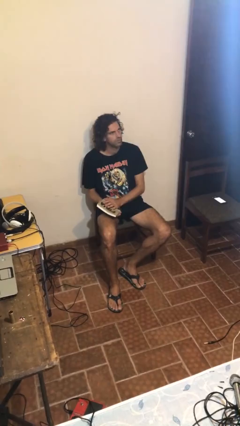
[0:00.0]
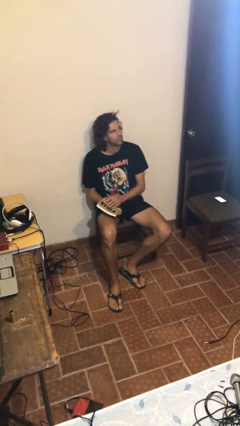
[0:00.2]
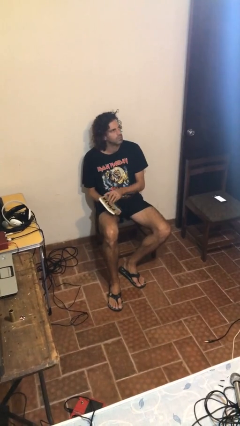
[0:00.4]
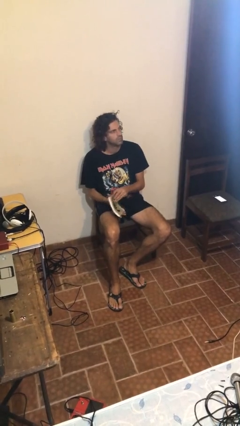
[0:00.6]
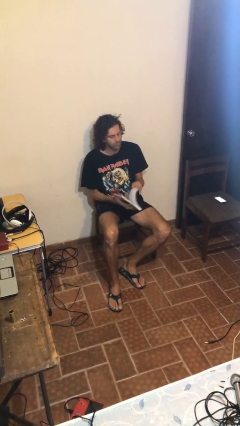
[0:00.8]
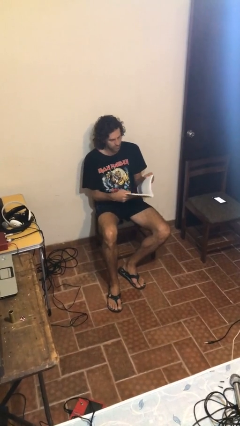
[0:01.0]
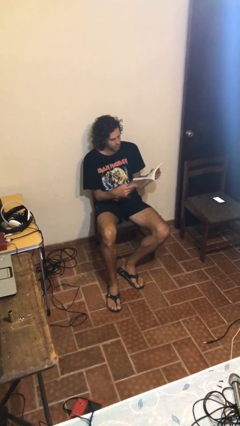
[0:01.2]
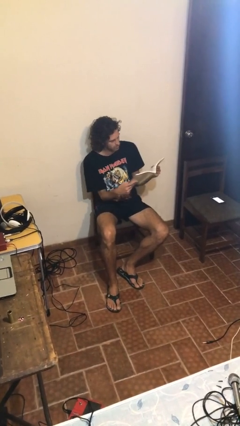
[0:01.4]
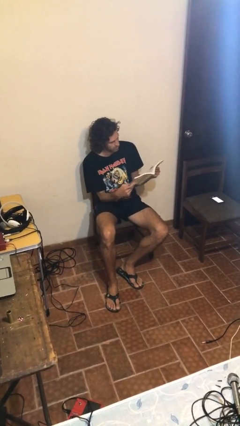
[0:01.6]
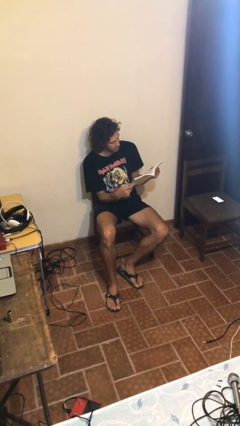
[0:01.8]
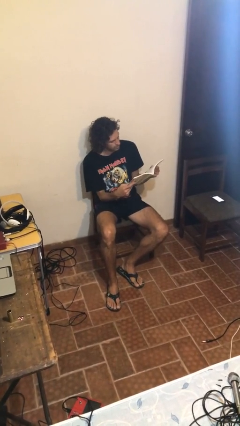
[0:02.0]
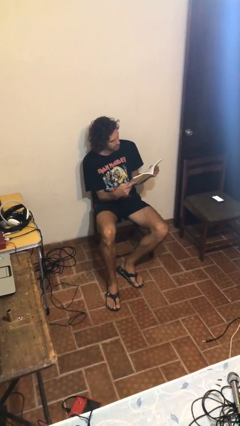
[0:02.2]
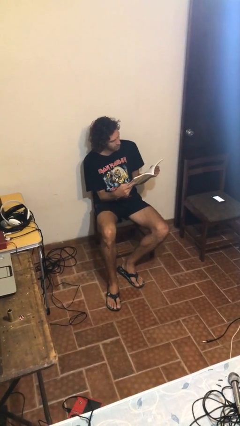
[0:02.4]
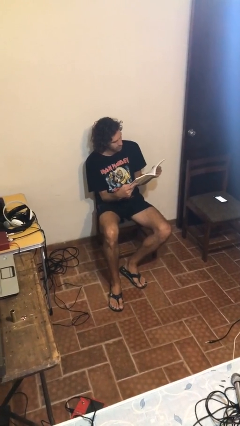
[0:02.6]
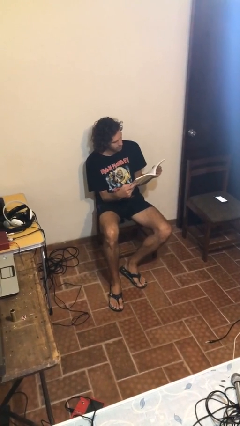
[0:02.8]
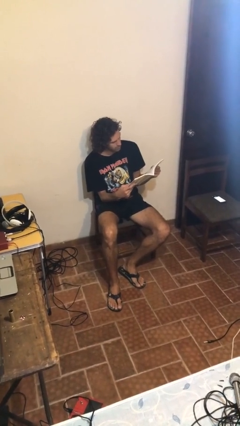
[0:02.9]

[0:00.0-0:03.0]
person reads document

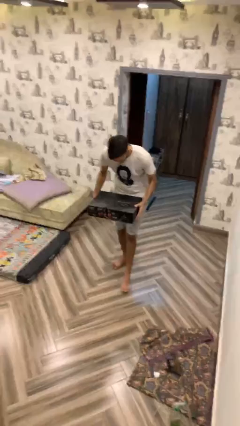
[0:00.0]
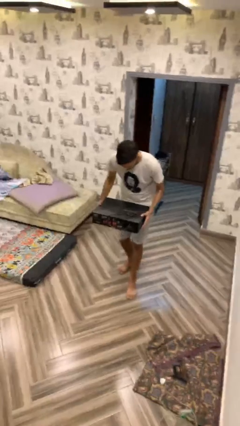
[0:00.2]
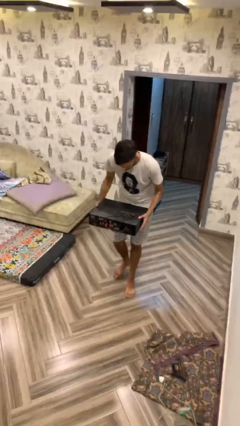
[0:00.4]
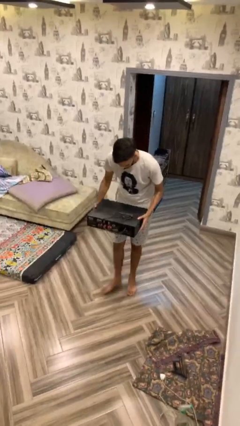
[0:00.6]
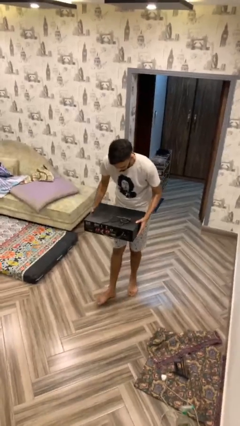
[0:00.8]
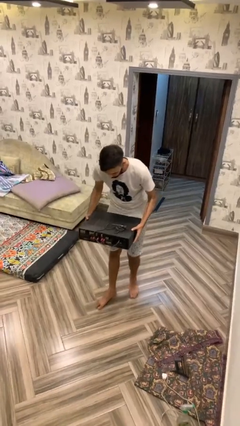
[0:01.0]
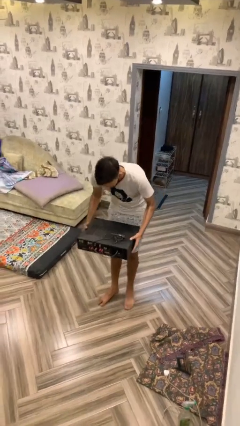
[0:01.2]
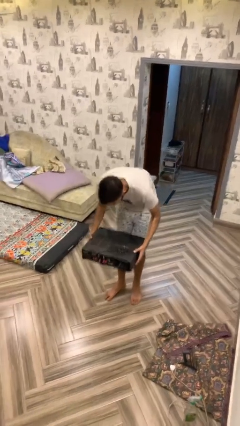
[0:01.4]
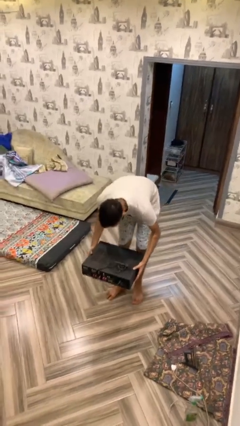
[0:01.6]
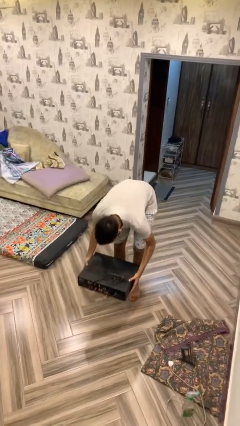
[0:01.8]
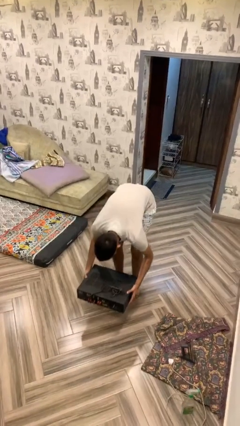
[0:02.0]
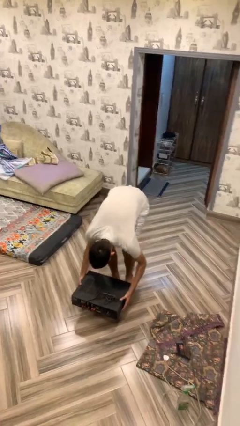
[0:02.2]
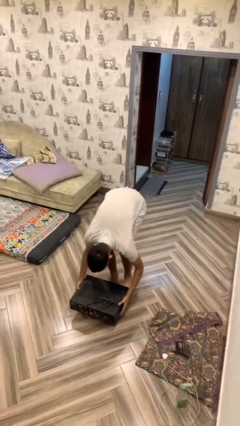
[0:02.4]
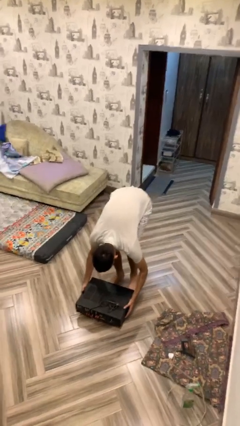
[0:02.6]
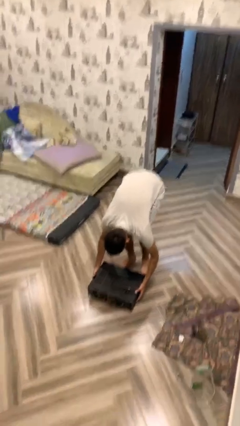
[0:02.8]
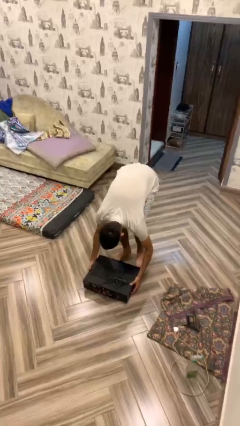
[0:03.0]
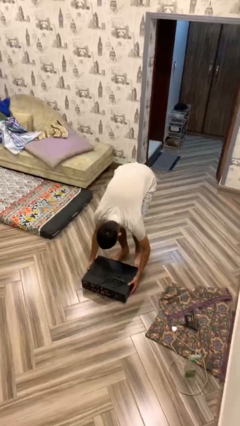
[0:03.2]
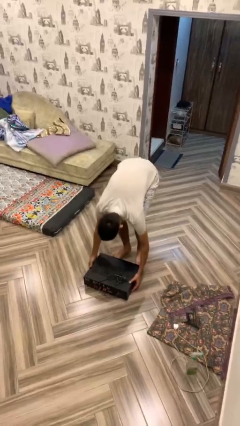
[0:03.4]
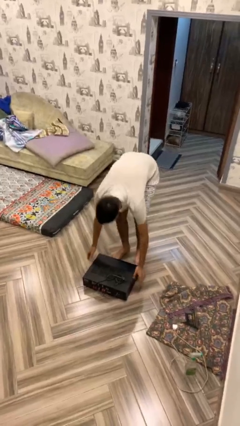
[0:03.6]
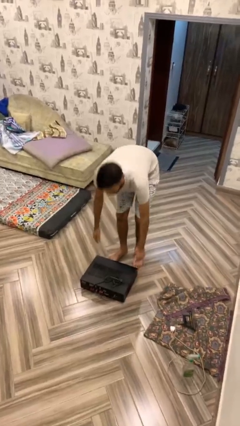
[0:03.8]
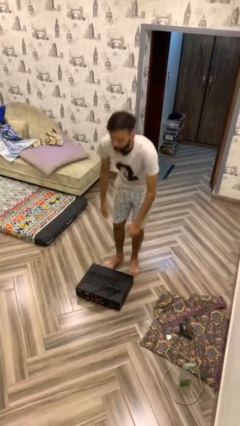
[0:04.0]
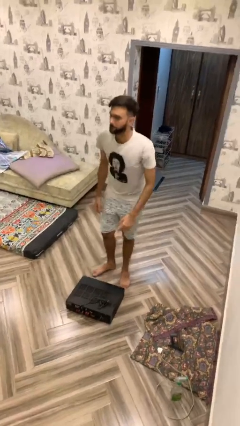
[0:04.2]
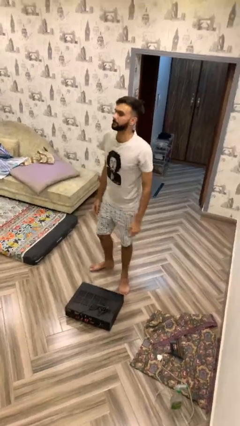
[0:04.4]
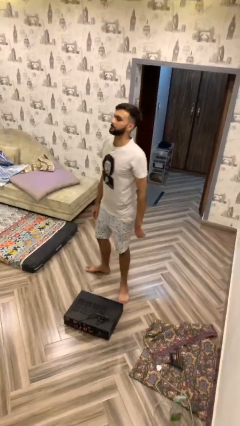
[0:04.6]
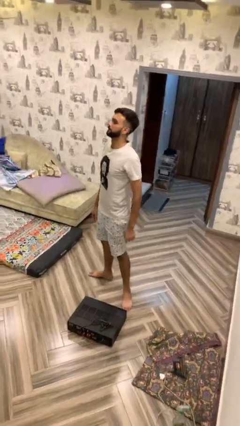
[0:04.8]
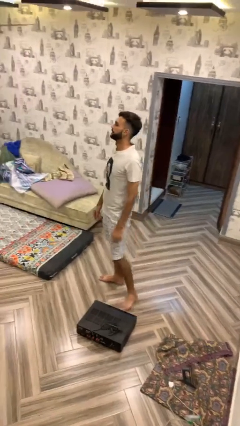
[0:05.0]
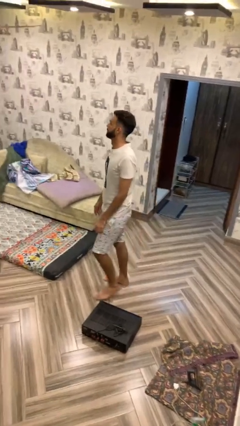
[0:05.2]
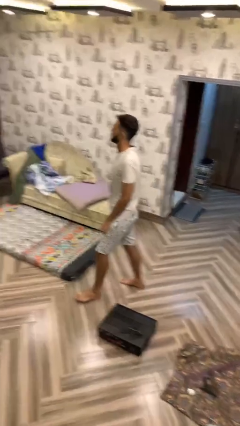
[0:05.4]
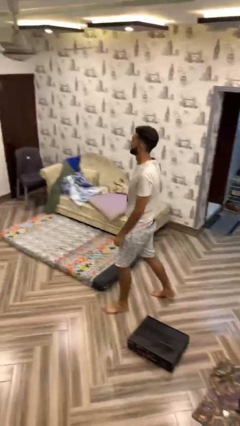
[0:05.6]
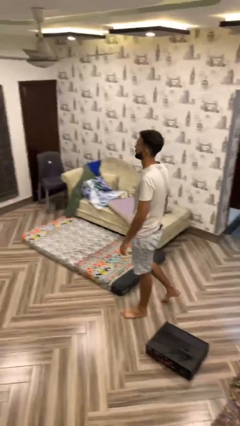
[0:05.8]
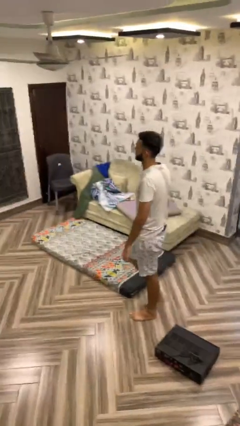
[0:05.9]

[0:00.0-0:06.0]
person puts down object on floor

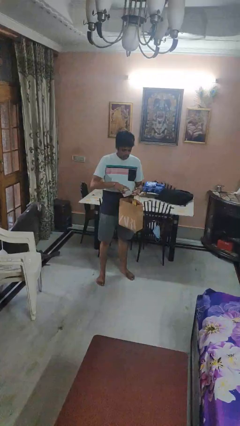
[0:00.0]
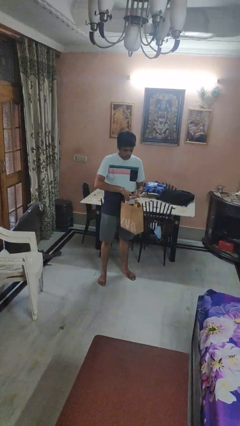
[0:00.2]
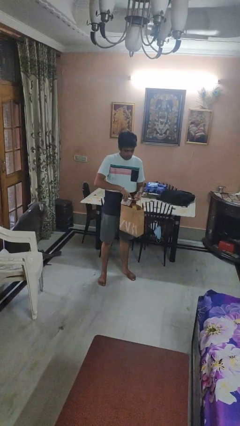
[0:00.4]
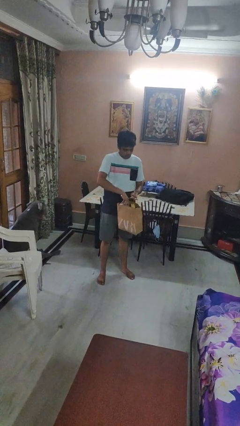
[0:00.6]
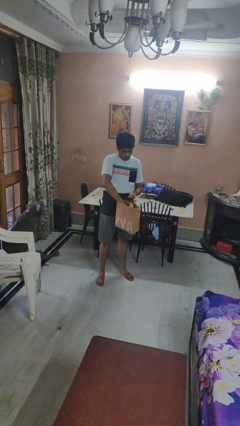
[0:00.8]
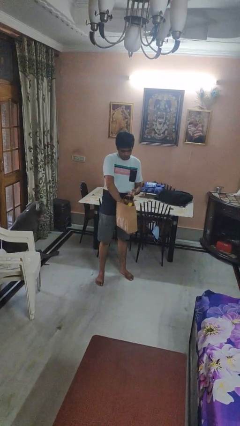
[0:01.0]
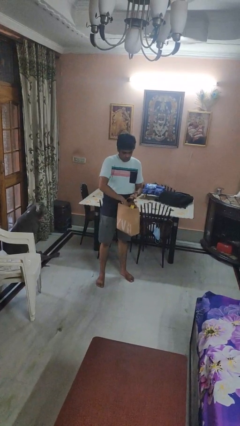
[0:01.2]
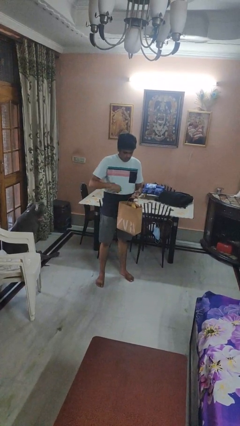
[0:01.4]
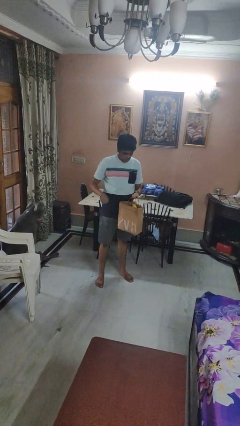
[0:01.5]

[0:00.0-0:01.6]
person puts object into bag

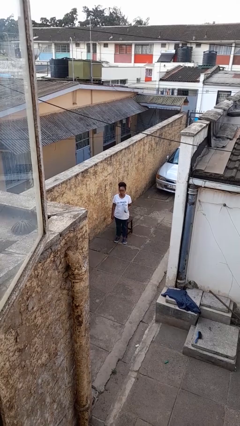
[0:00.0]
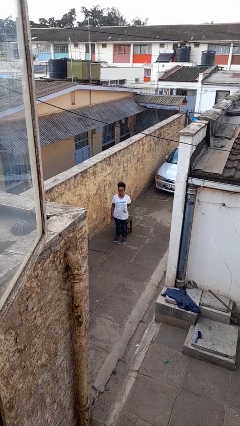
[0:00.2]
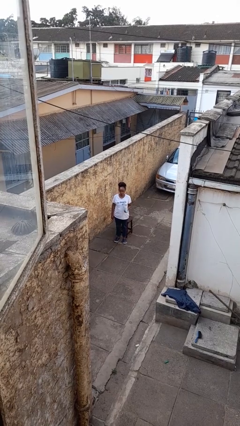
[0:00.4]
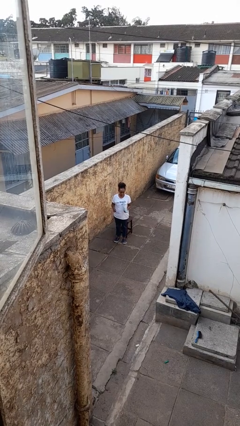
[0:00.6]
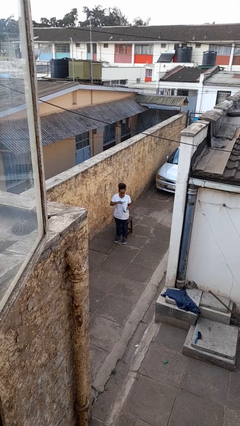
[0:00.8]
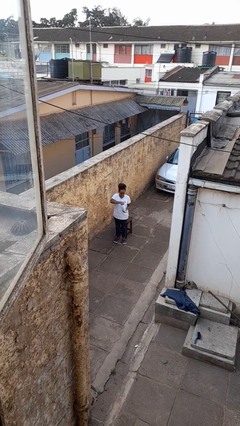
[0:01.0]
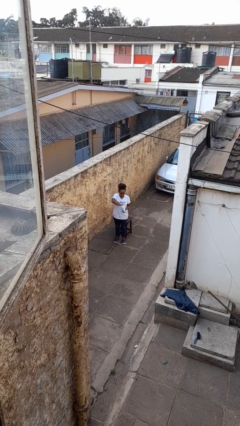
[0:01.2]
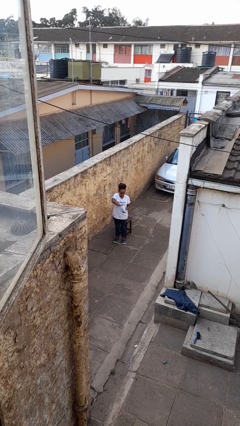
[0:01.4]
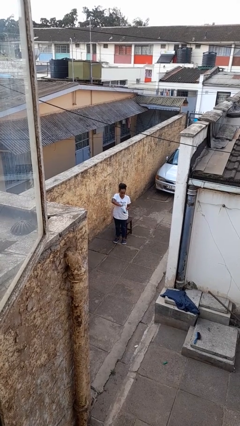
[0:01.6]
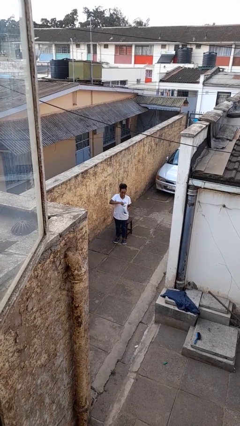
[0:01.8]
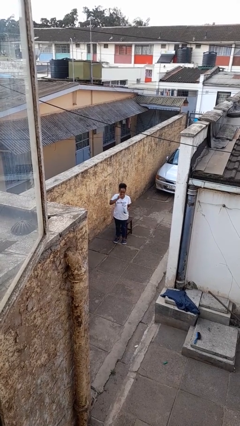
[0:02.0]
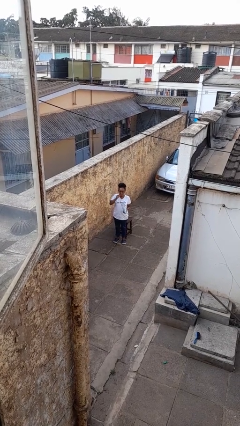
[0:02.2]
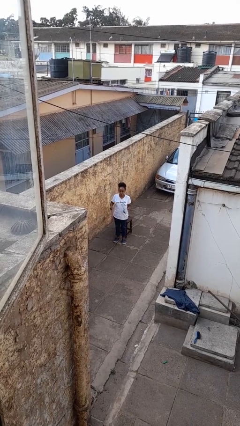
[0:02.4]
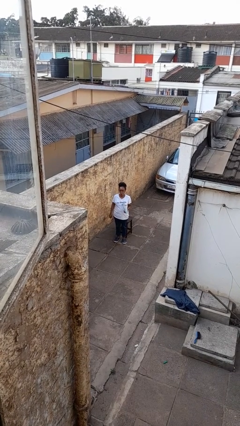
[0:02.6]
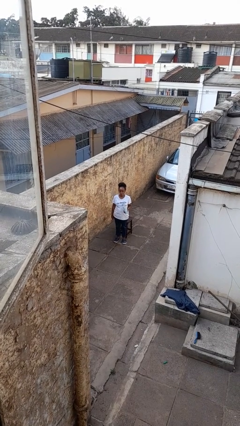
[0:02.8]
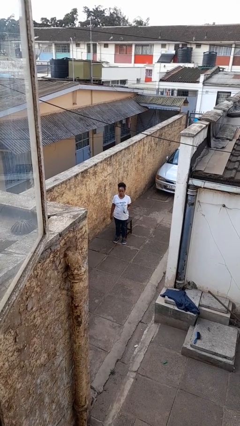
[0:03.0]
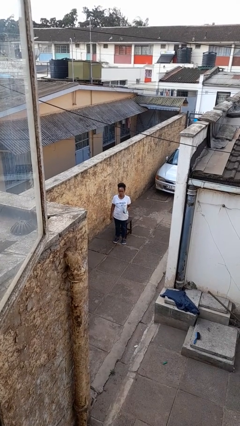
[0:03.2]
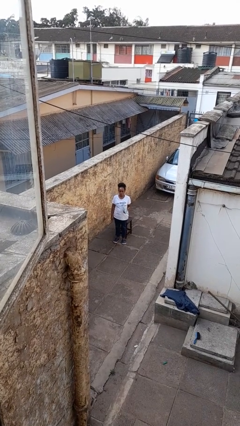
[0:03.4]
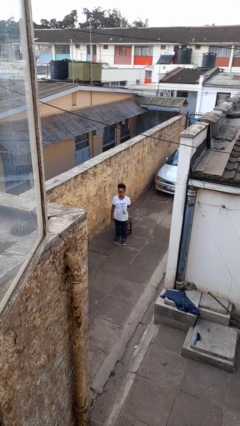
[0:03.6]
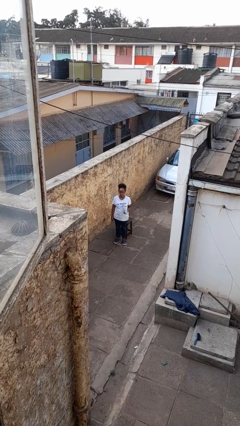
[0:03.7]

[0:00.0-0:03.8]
person eats snack from bag

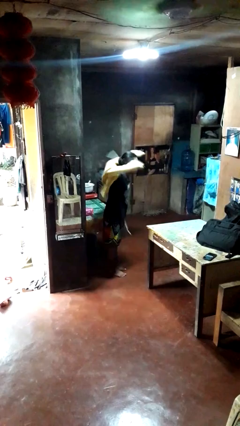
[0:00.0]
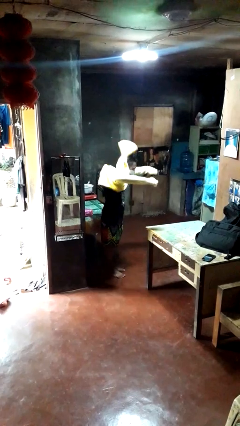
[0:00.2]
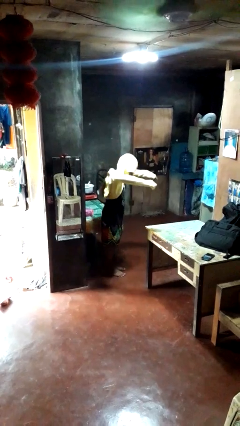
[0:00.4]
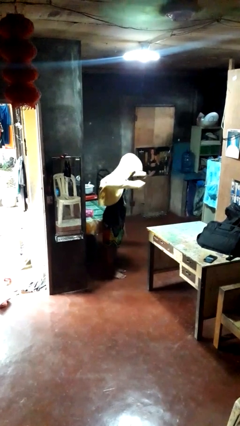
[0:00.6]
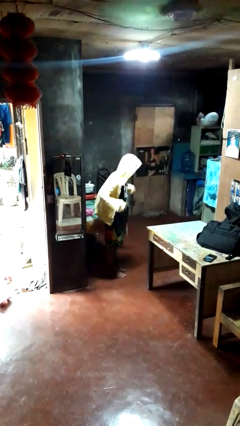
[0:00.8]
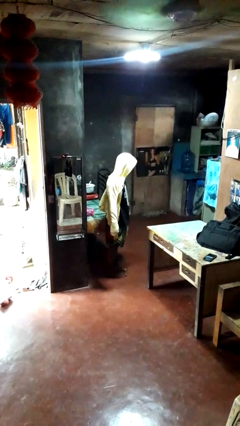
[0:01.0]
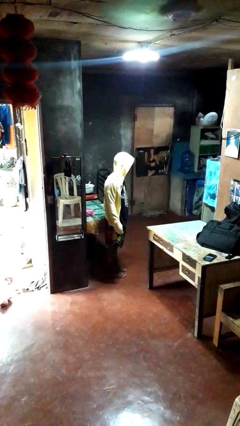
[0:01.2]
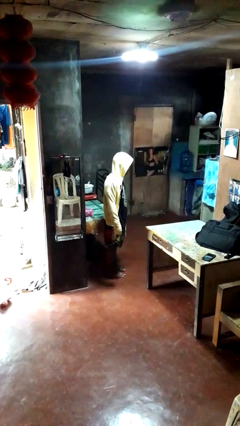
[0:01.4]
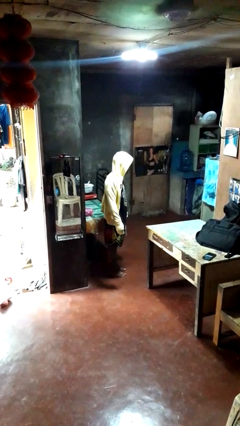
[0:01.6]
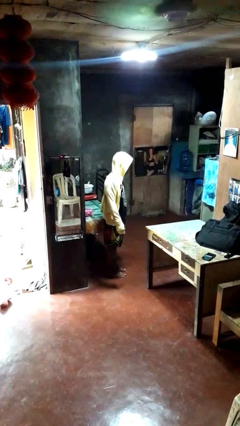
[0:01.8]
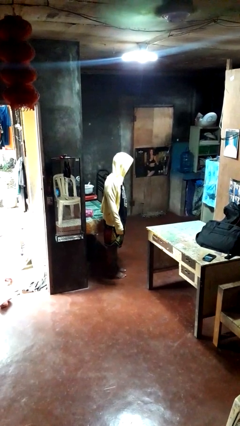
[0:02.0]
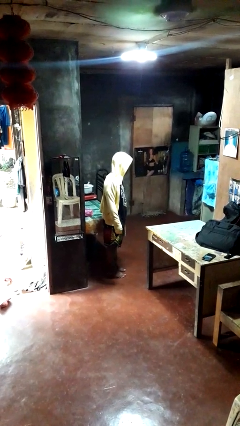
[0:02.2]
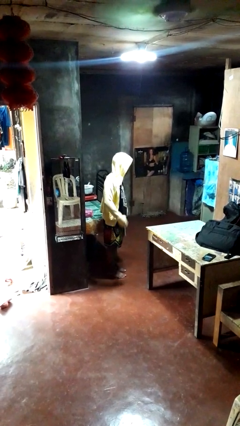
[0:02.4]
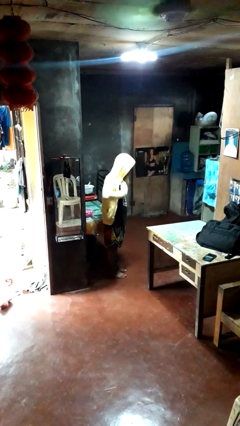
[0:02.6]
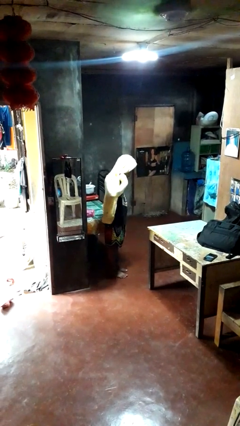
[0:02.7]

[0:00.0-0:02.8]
person puts on hoodie

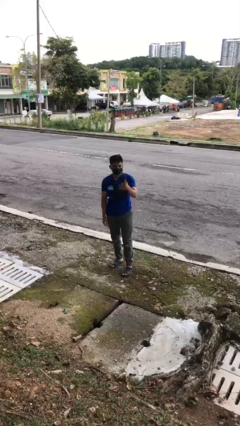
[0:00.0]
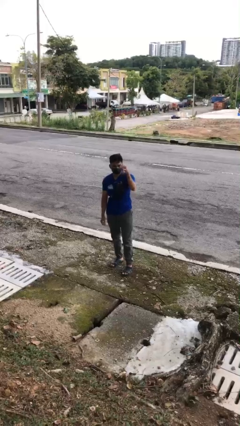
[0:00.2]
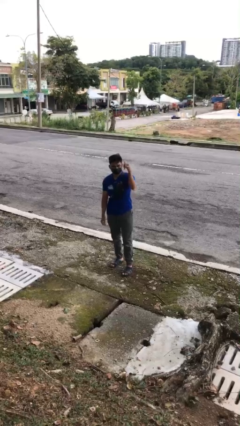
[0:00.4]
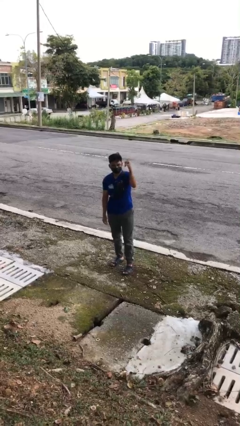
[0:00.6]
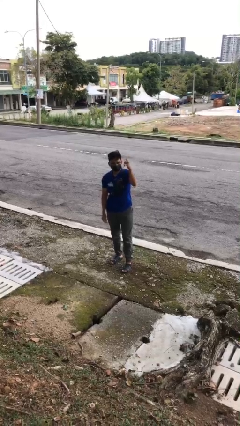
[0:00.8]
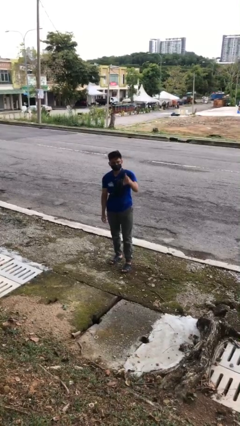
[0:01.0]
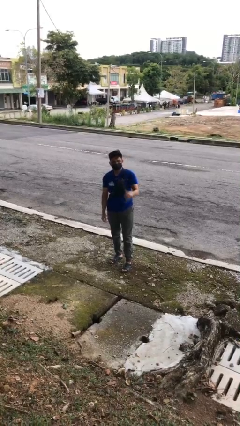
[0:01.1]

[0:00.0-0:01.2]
person gestures hang loose
